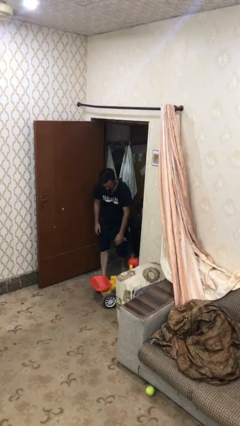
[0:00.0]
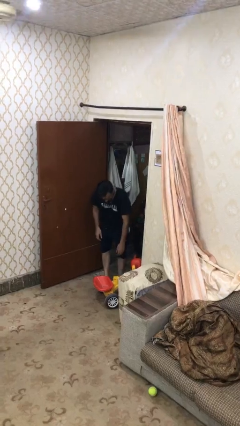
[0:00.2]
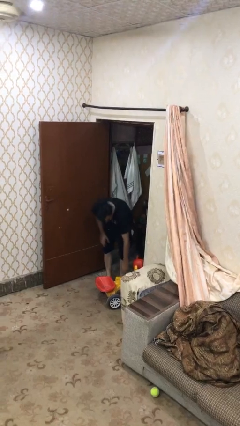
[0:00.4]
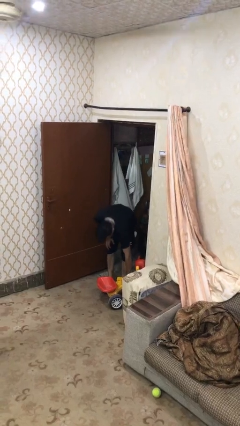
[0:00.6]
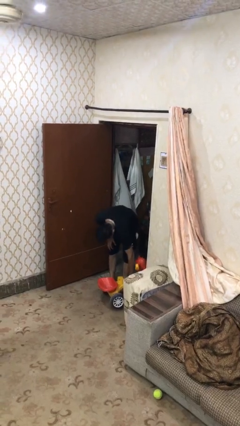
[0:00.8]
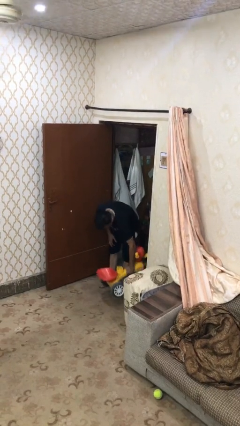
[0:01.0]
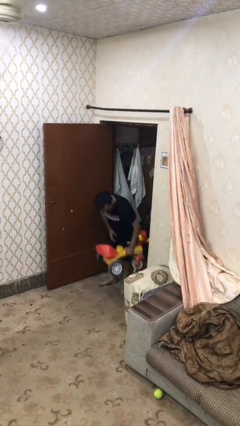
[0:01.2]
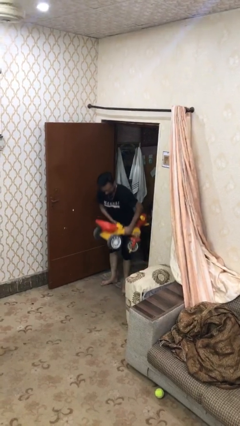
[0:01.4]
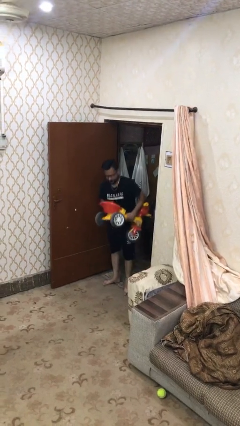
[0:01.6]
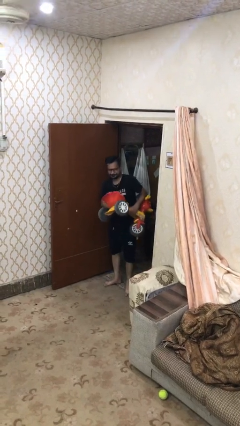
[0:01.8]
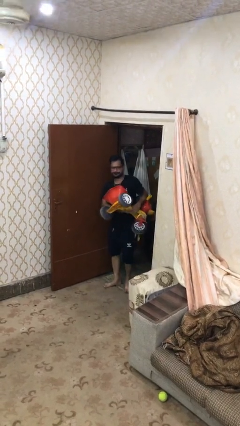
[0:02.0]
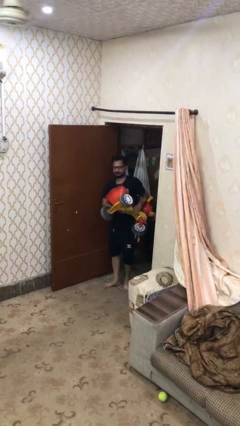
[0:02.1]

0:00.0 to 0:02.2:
person picks up object from floor

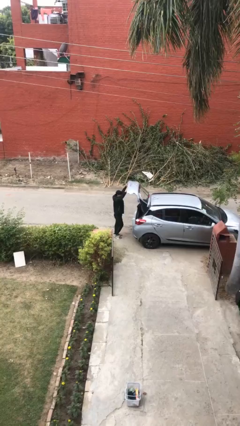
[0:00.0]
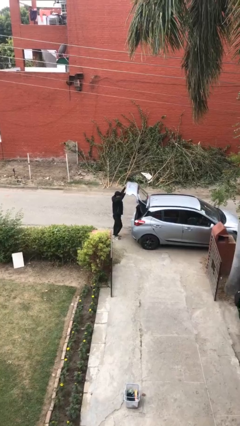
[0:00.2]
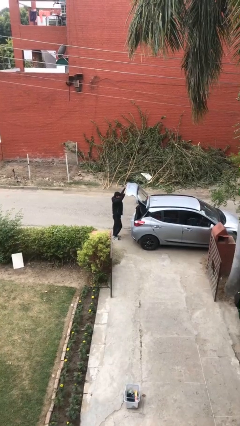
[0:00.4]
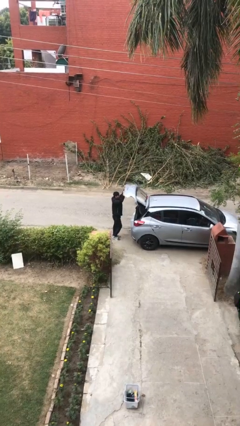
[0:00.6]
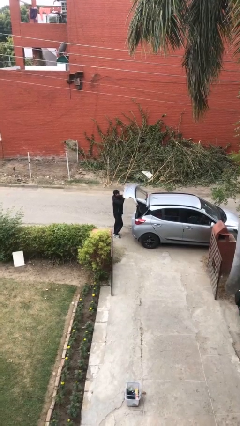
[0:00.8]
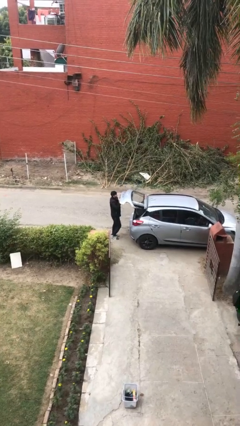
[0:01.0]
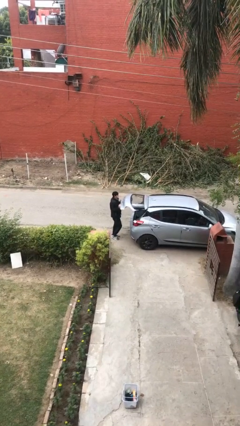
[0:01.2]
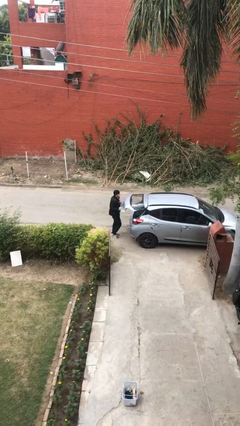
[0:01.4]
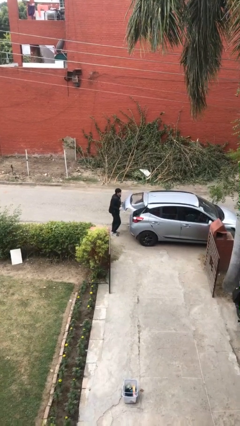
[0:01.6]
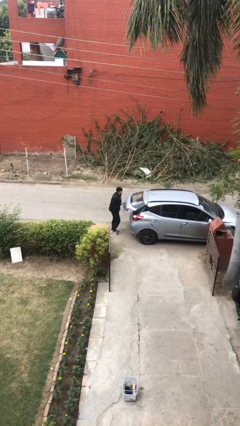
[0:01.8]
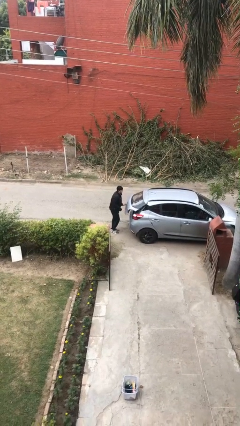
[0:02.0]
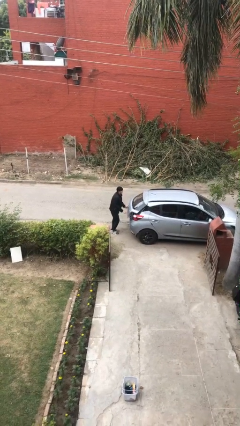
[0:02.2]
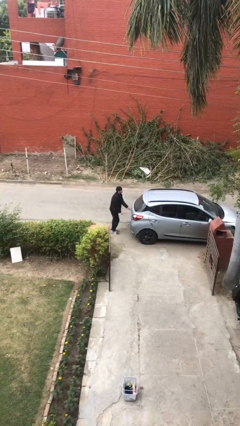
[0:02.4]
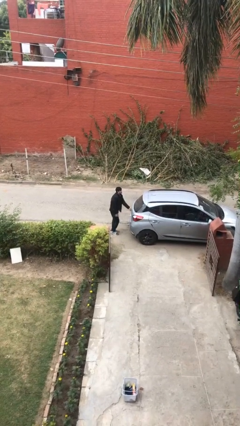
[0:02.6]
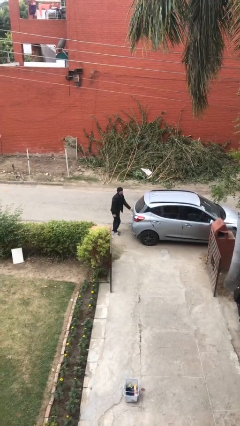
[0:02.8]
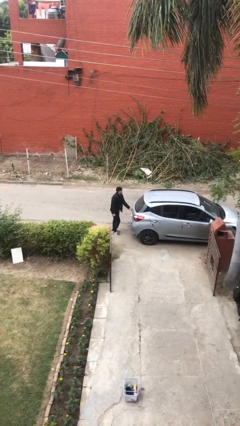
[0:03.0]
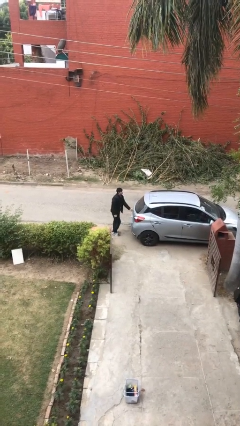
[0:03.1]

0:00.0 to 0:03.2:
person closes car trunk

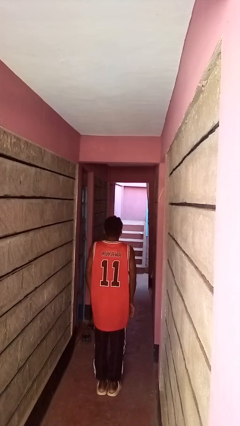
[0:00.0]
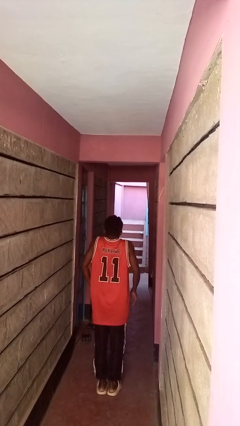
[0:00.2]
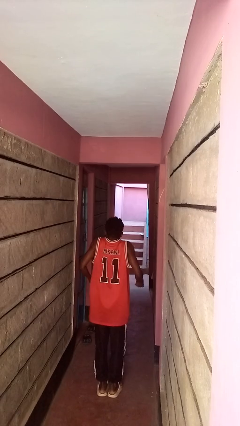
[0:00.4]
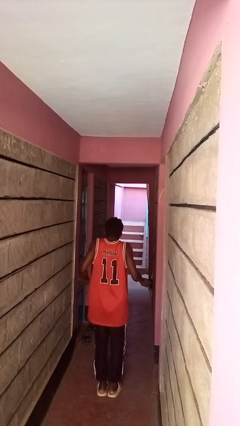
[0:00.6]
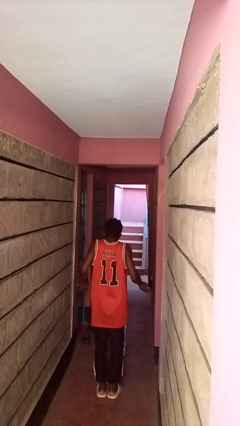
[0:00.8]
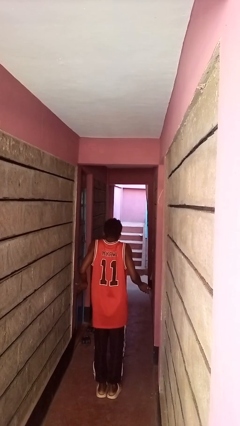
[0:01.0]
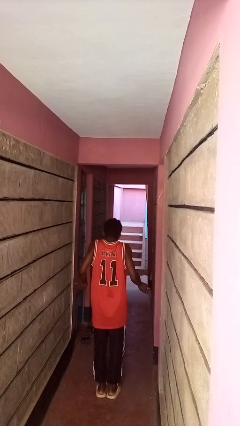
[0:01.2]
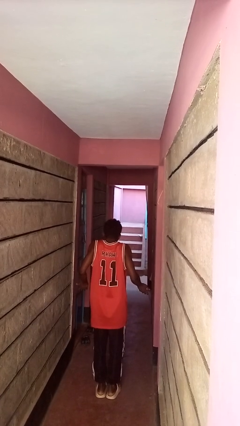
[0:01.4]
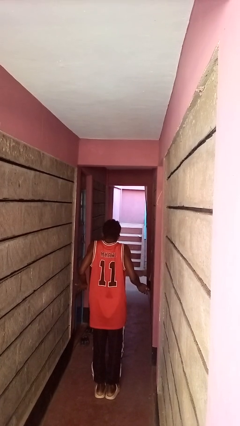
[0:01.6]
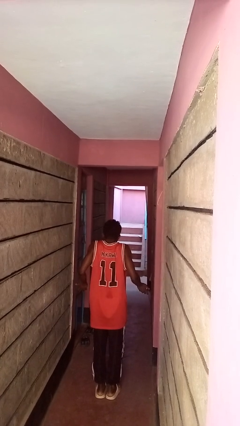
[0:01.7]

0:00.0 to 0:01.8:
person shrugs

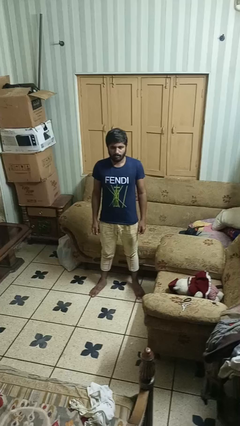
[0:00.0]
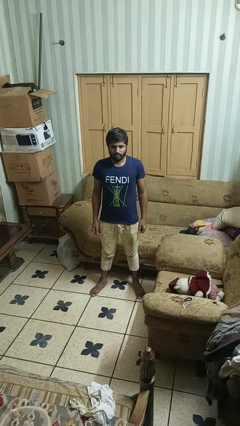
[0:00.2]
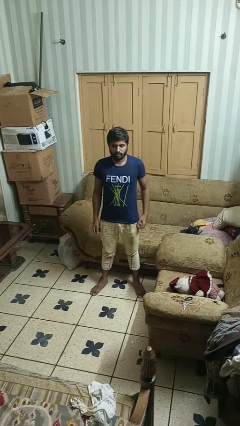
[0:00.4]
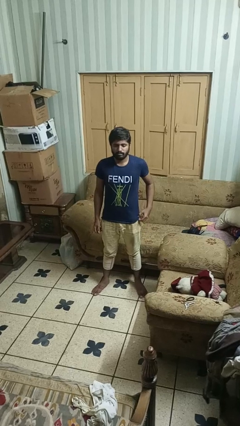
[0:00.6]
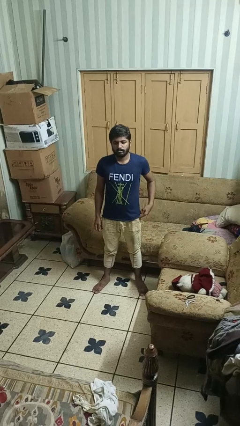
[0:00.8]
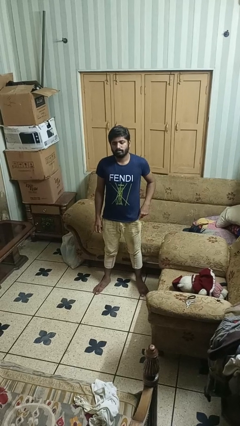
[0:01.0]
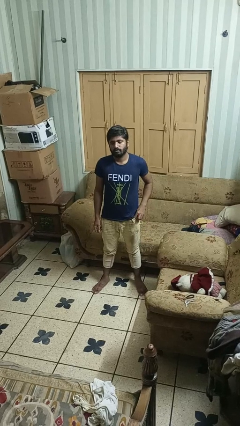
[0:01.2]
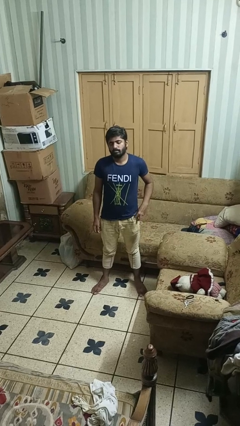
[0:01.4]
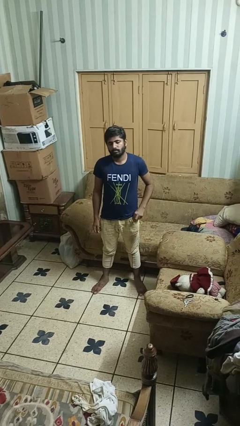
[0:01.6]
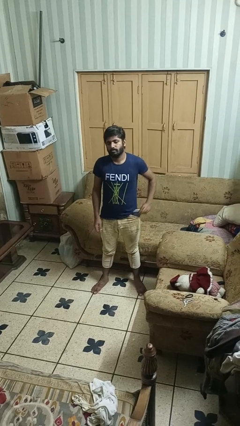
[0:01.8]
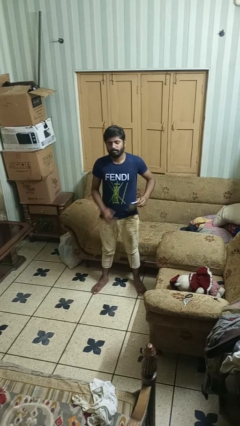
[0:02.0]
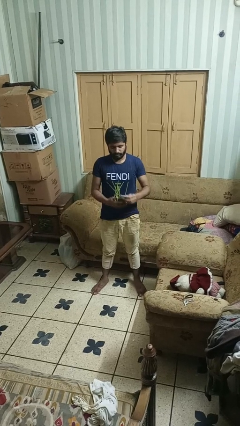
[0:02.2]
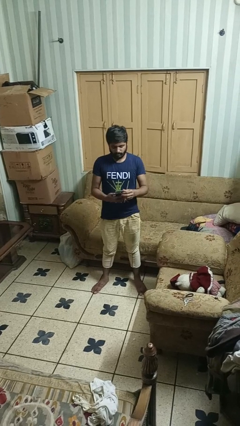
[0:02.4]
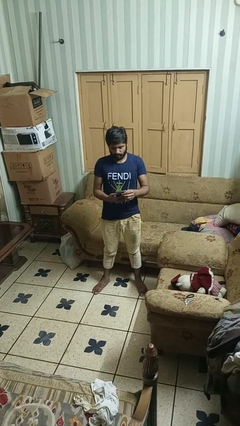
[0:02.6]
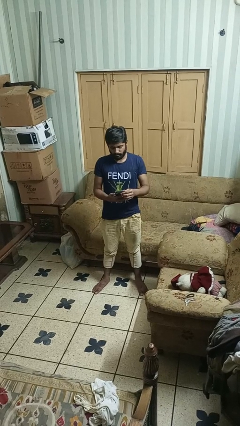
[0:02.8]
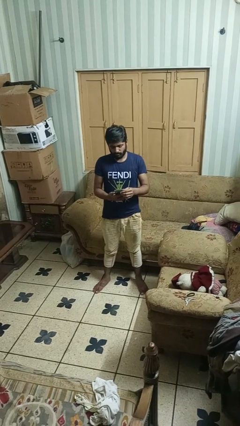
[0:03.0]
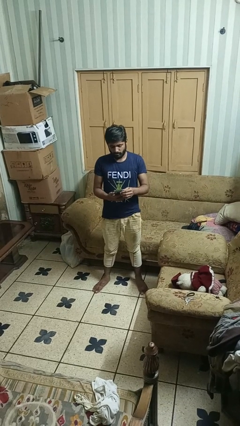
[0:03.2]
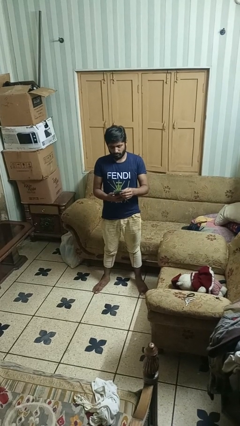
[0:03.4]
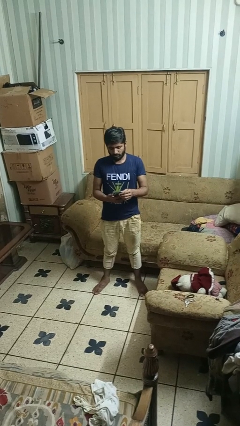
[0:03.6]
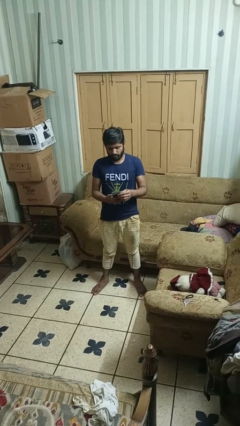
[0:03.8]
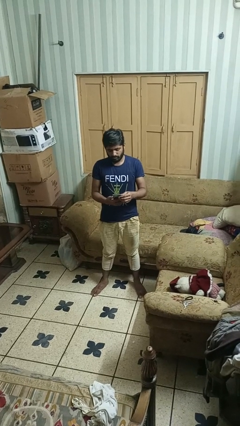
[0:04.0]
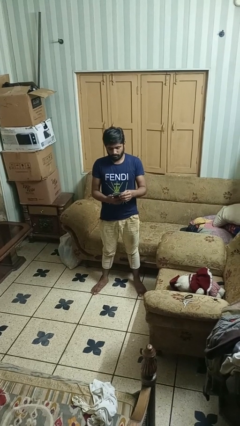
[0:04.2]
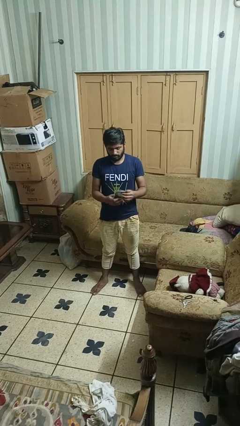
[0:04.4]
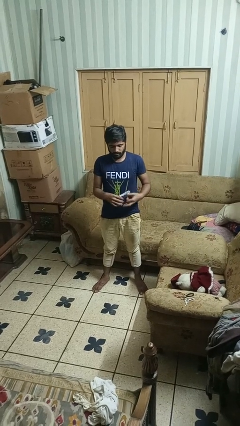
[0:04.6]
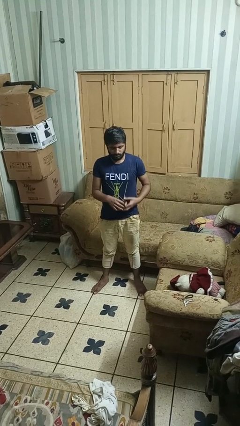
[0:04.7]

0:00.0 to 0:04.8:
person takes phone from pocket

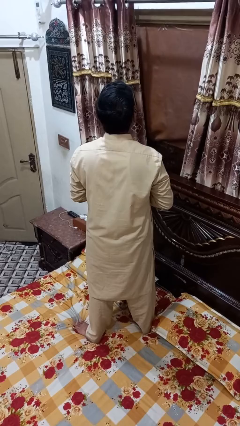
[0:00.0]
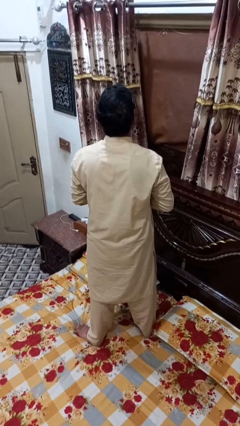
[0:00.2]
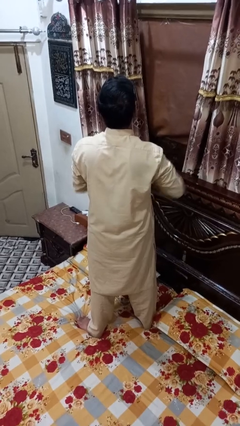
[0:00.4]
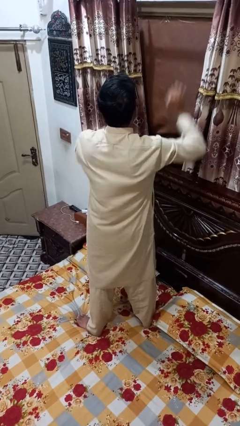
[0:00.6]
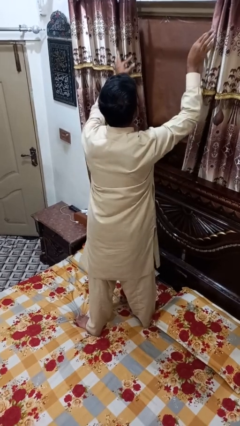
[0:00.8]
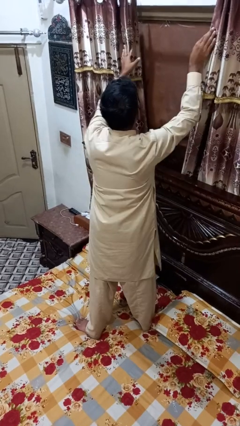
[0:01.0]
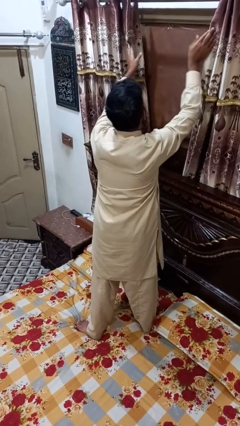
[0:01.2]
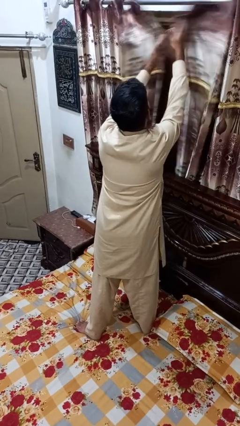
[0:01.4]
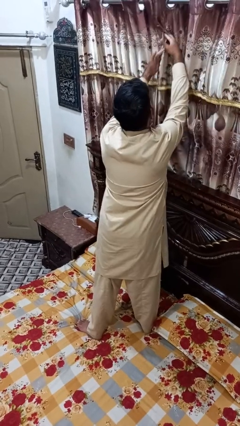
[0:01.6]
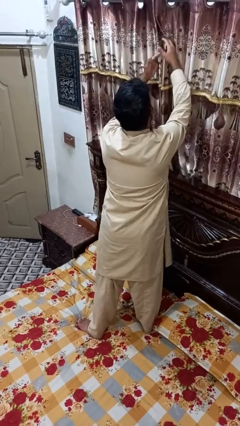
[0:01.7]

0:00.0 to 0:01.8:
person closes curtains

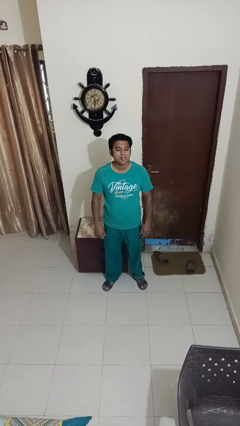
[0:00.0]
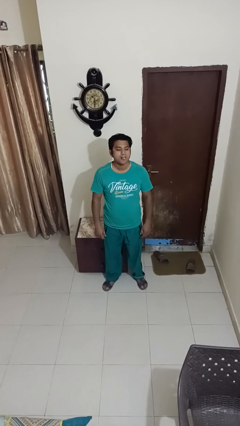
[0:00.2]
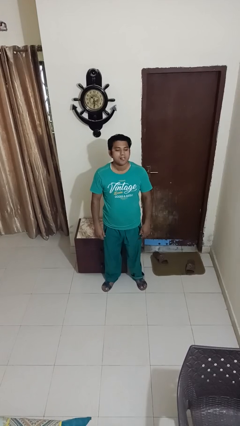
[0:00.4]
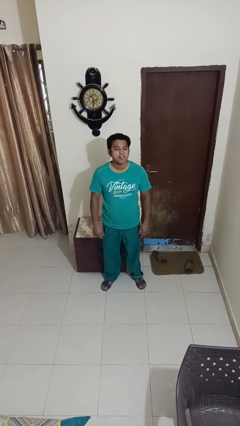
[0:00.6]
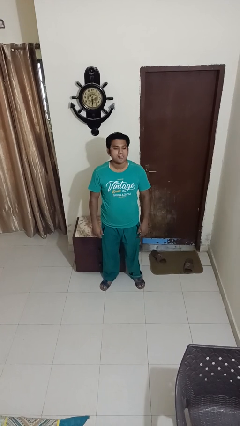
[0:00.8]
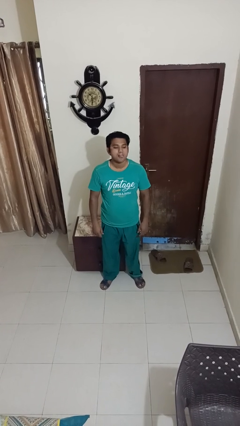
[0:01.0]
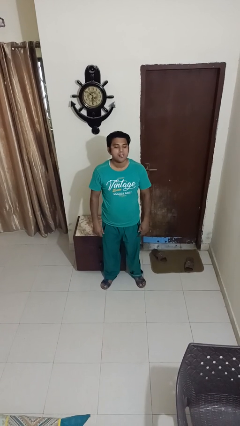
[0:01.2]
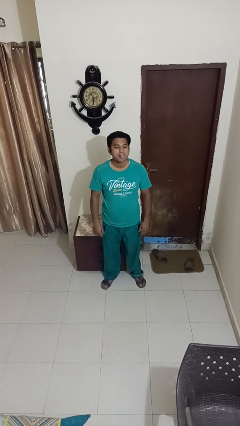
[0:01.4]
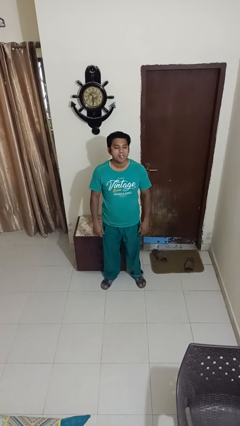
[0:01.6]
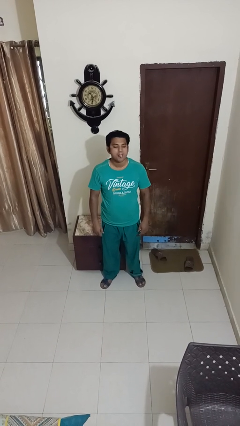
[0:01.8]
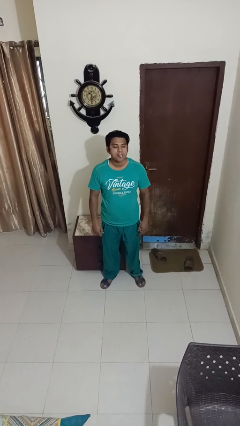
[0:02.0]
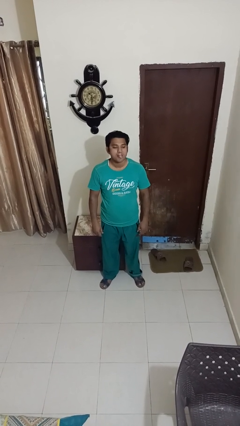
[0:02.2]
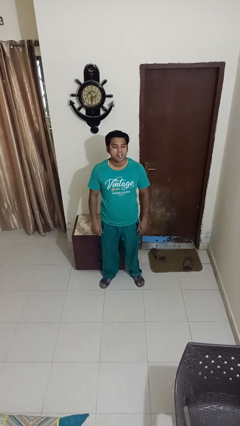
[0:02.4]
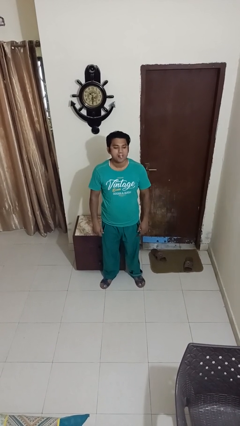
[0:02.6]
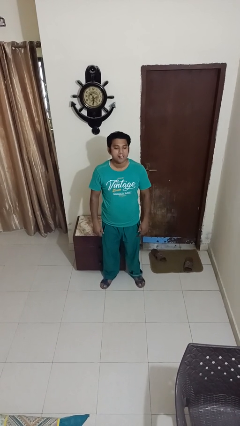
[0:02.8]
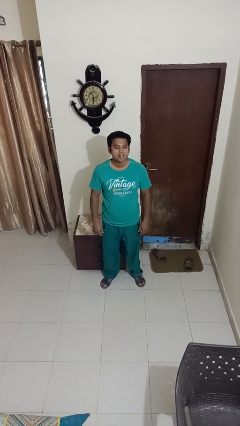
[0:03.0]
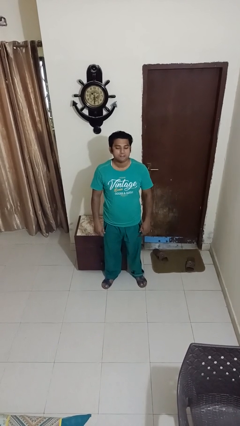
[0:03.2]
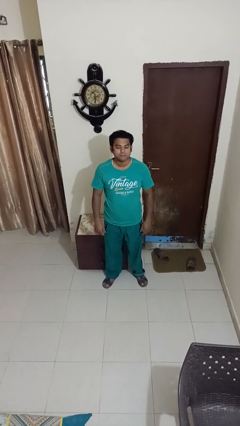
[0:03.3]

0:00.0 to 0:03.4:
person sticks out tongue
